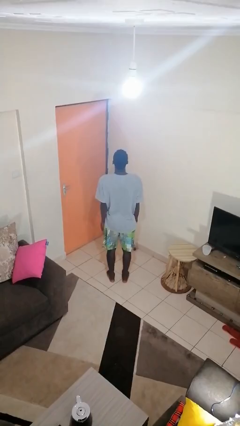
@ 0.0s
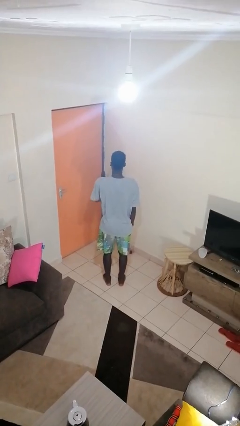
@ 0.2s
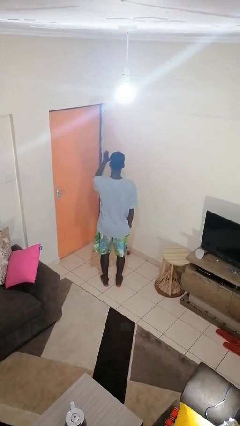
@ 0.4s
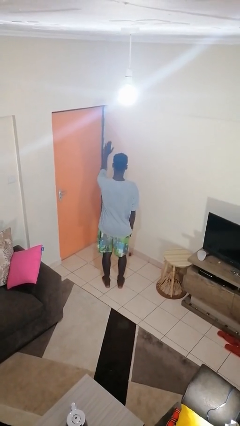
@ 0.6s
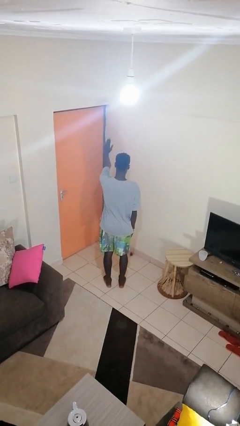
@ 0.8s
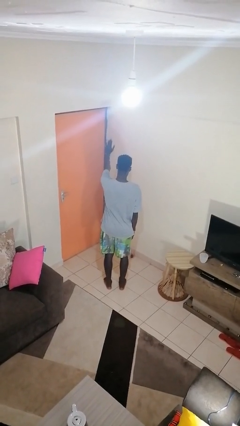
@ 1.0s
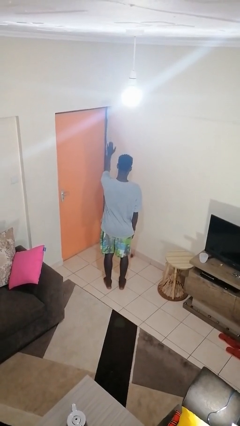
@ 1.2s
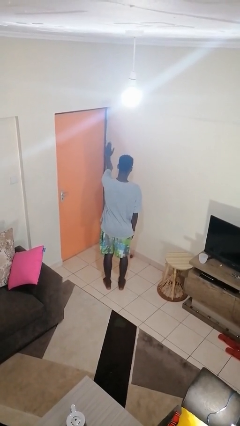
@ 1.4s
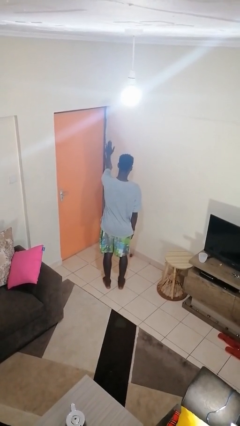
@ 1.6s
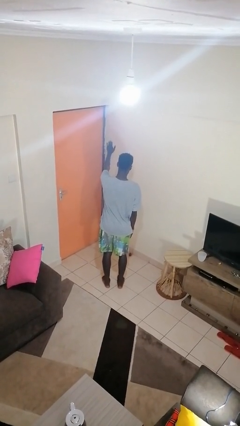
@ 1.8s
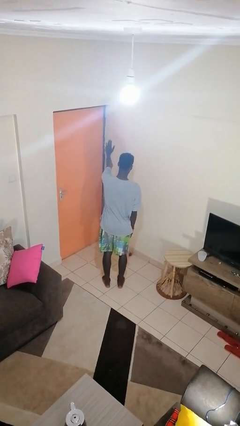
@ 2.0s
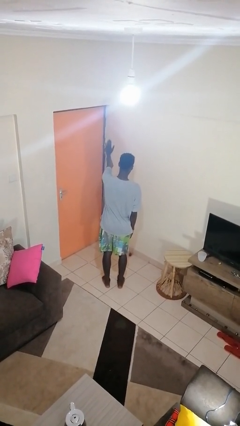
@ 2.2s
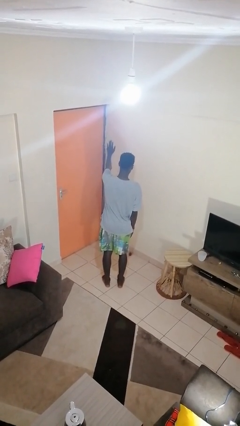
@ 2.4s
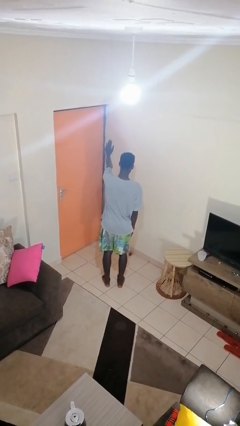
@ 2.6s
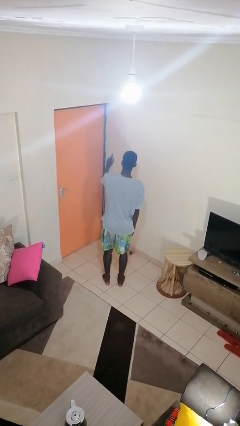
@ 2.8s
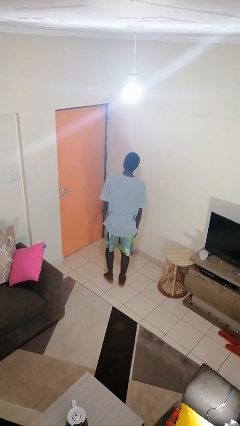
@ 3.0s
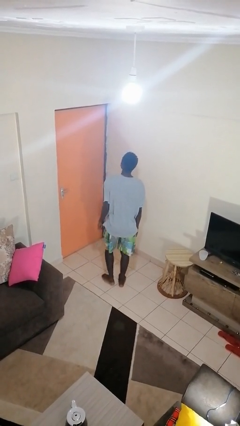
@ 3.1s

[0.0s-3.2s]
person gestures stop

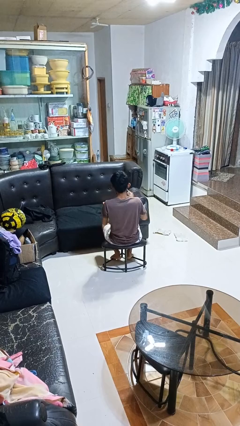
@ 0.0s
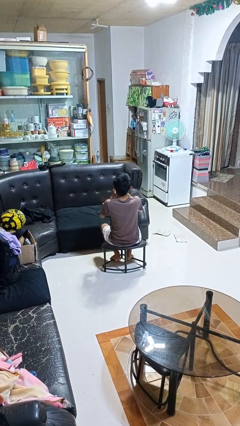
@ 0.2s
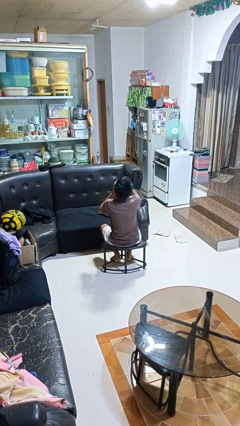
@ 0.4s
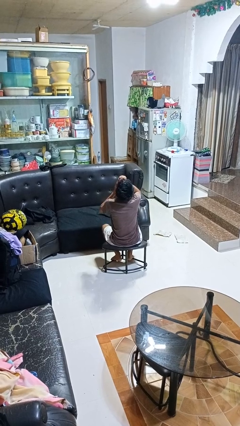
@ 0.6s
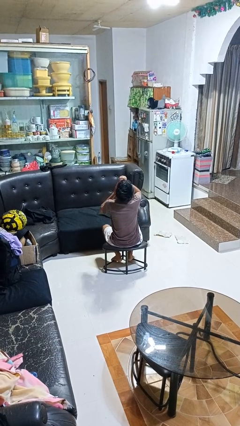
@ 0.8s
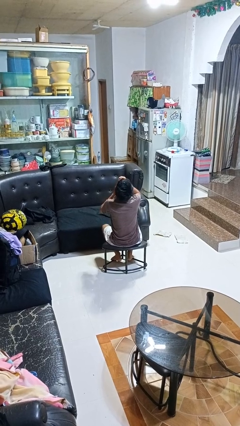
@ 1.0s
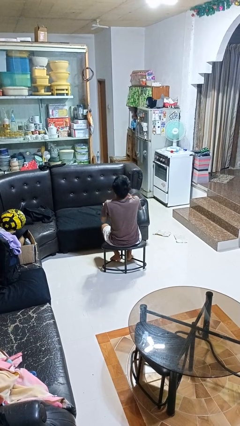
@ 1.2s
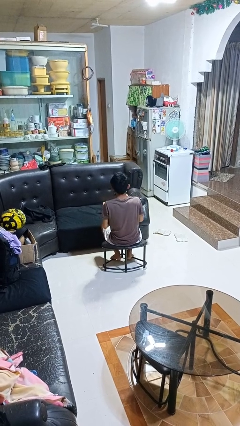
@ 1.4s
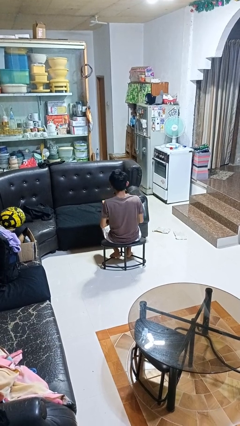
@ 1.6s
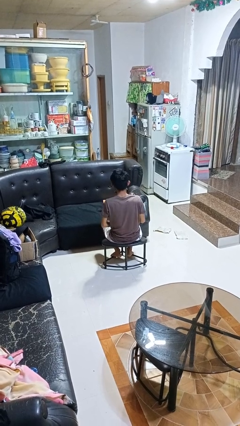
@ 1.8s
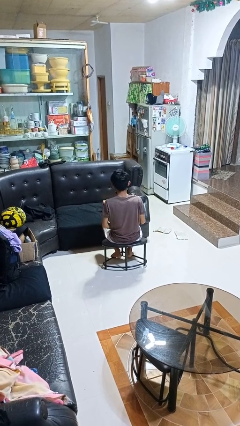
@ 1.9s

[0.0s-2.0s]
person drinks from beverage can

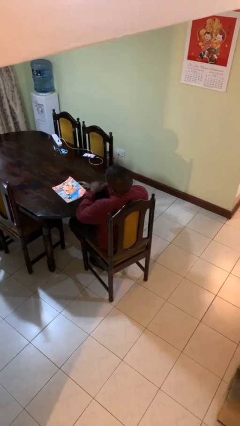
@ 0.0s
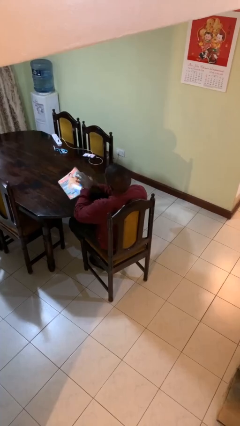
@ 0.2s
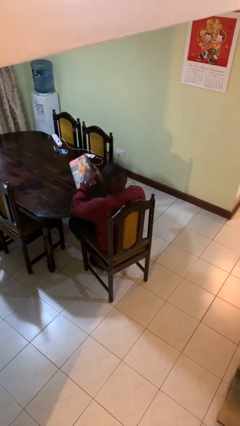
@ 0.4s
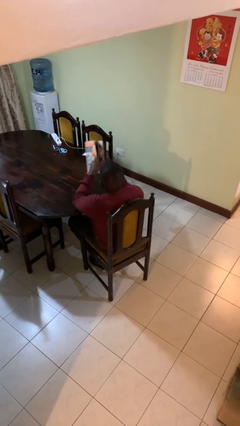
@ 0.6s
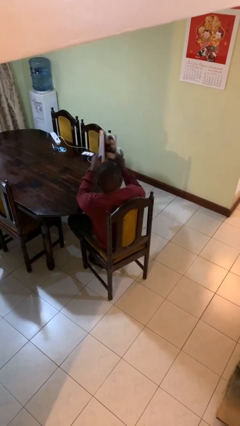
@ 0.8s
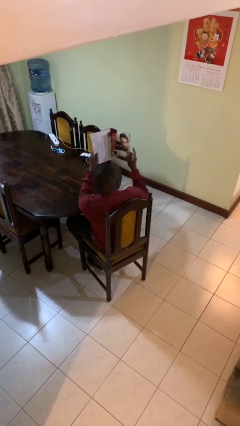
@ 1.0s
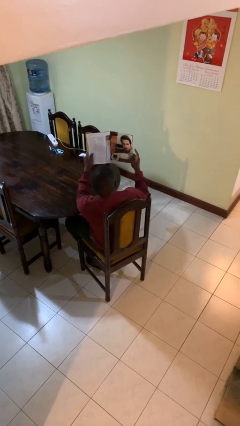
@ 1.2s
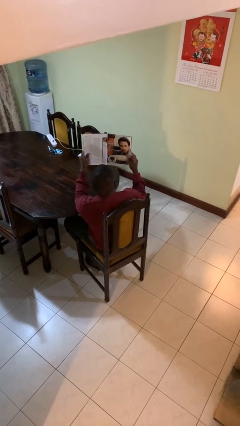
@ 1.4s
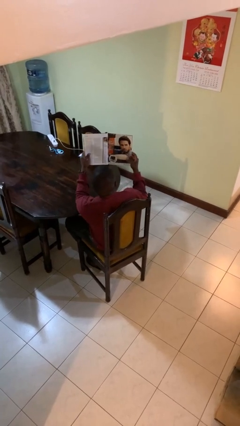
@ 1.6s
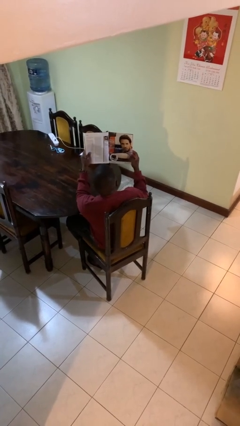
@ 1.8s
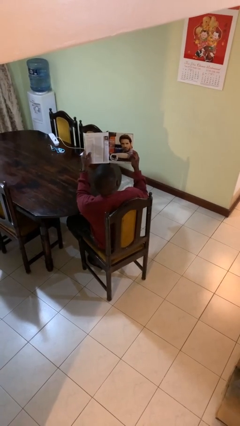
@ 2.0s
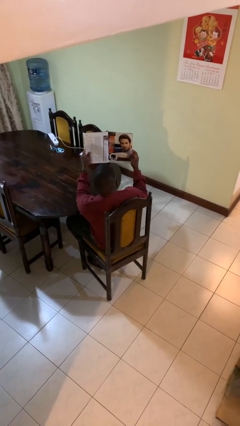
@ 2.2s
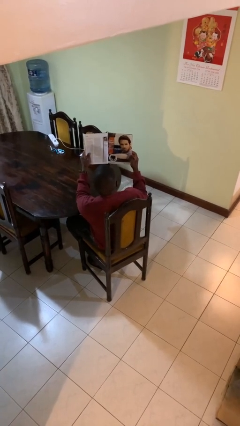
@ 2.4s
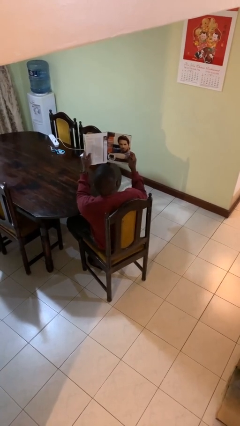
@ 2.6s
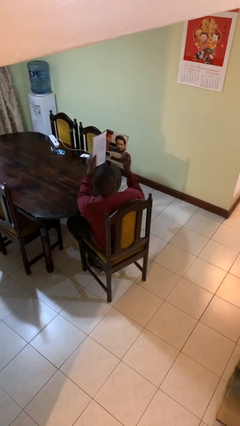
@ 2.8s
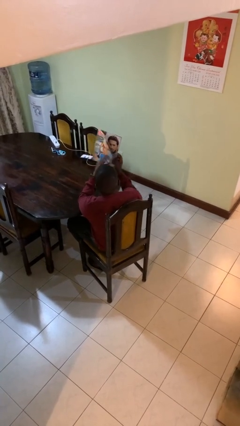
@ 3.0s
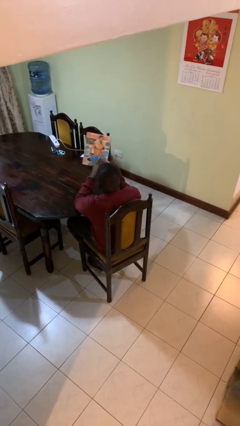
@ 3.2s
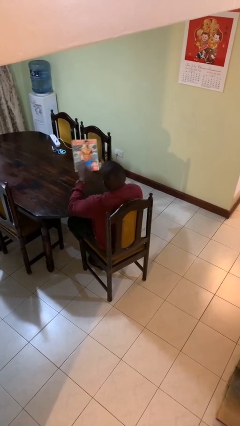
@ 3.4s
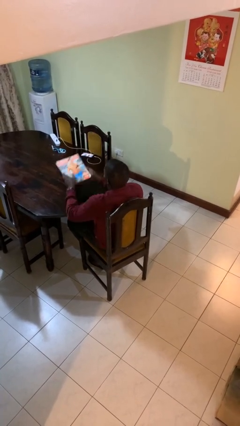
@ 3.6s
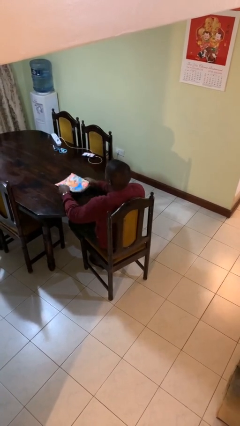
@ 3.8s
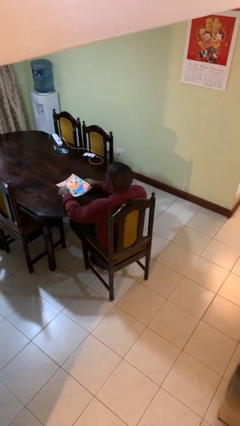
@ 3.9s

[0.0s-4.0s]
person reads magazine

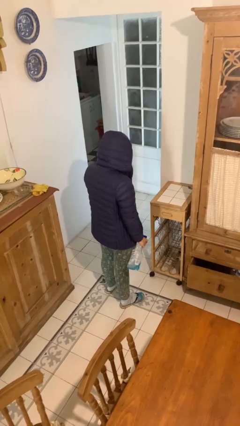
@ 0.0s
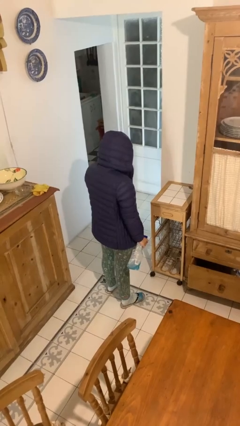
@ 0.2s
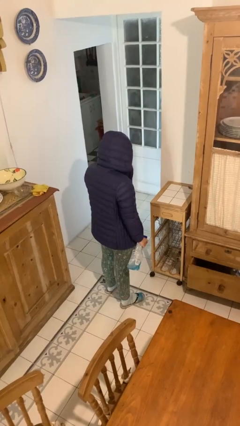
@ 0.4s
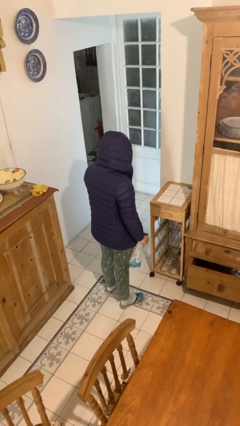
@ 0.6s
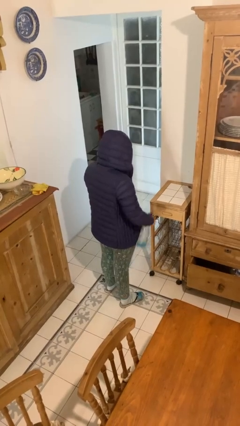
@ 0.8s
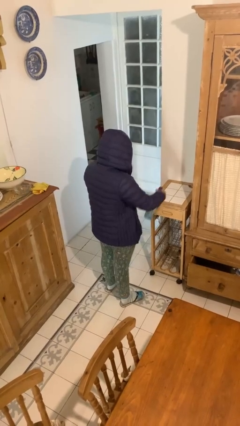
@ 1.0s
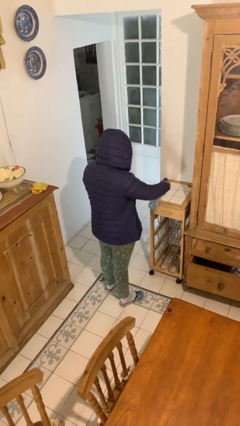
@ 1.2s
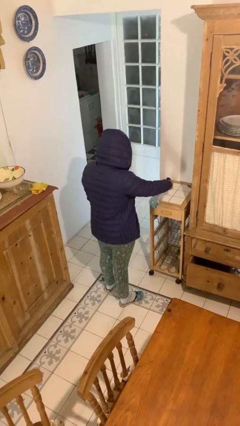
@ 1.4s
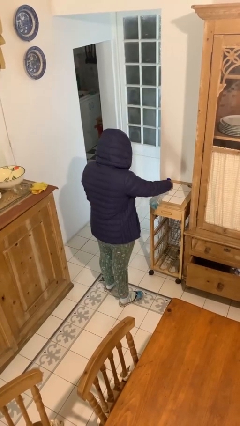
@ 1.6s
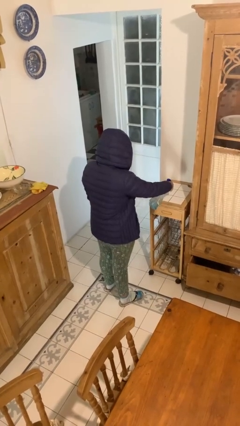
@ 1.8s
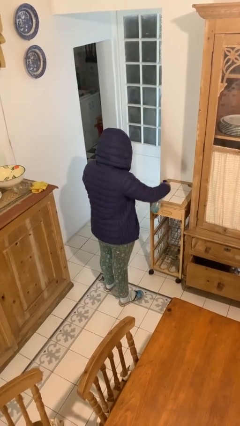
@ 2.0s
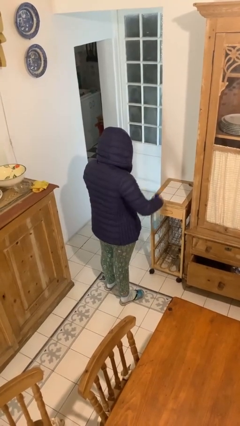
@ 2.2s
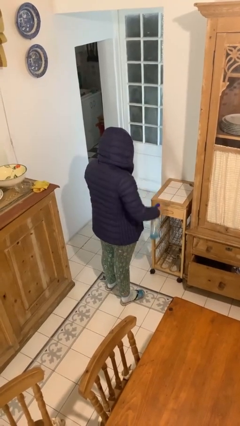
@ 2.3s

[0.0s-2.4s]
person sprays from bottle

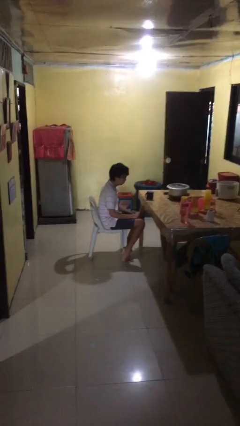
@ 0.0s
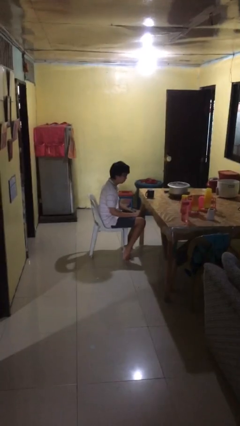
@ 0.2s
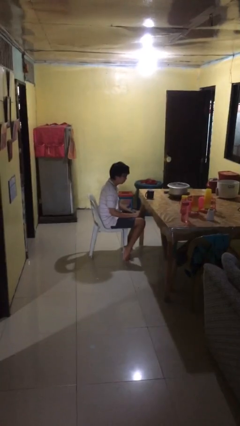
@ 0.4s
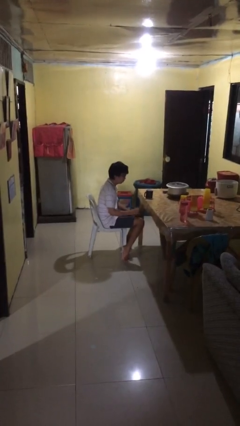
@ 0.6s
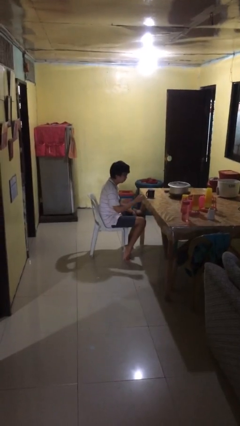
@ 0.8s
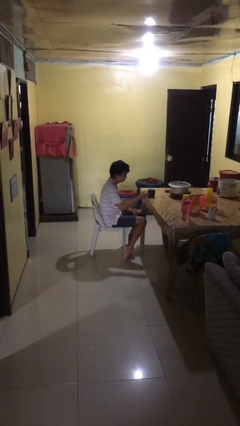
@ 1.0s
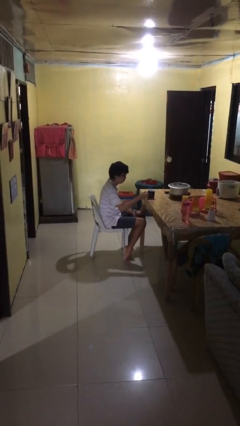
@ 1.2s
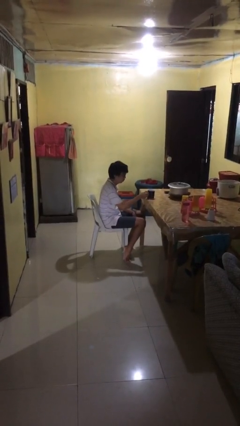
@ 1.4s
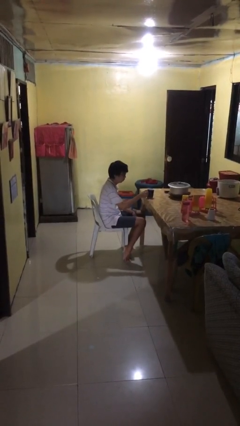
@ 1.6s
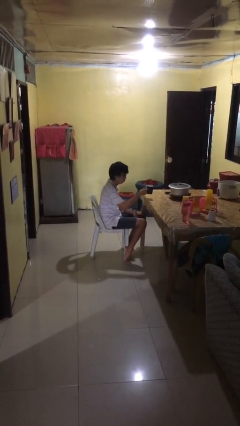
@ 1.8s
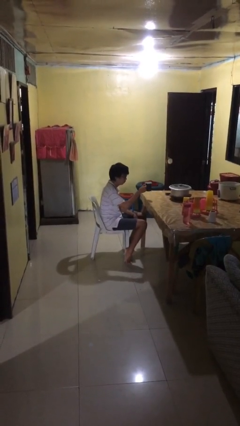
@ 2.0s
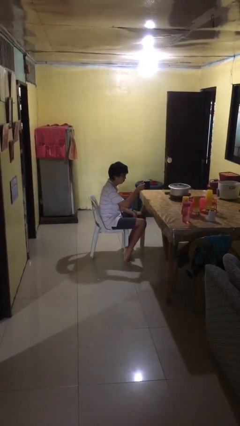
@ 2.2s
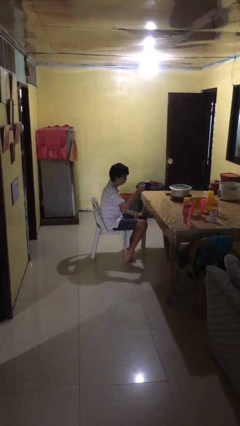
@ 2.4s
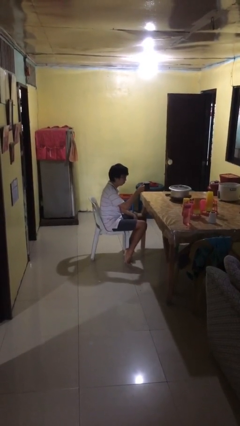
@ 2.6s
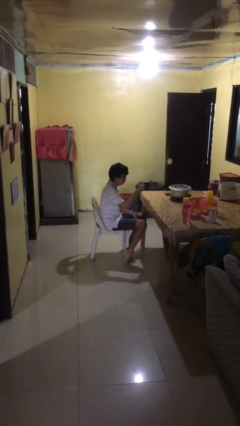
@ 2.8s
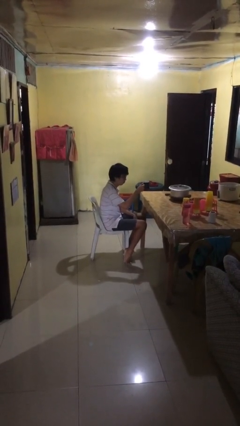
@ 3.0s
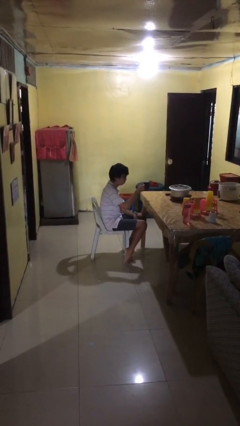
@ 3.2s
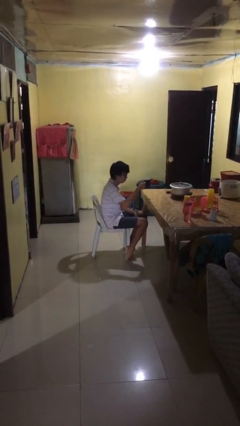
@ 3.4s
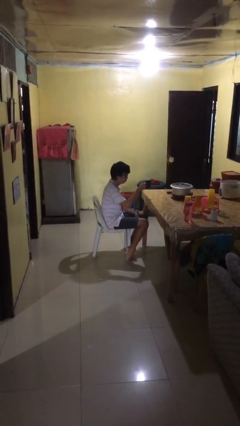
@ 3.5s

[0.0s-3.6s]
person picks up object from table

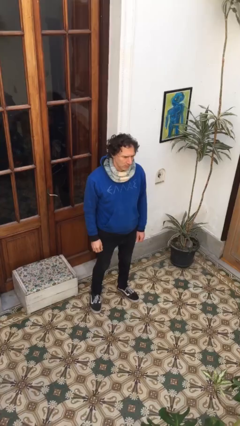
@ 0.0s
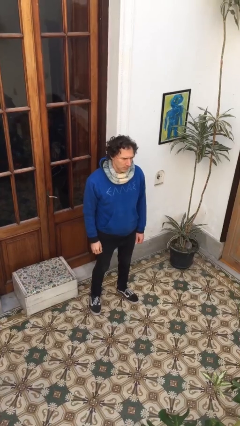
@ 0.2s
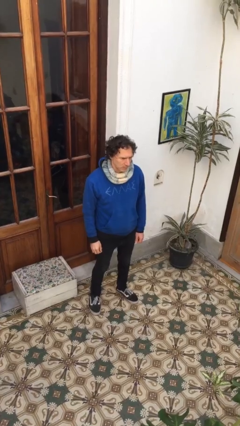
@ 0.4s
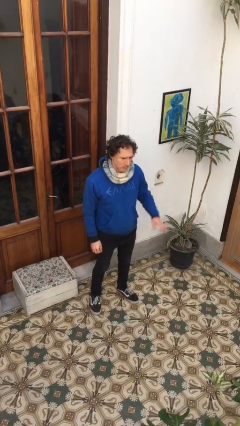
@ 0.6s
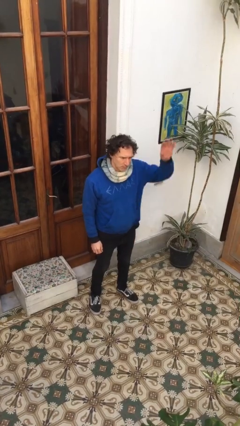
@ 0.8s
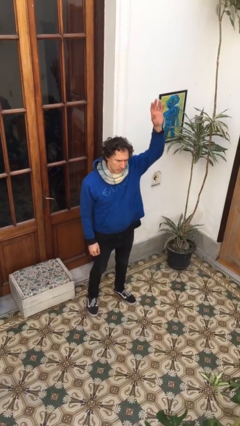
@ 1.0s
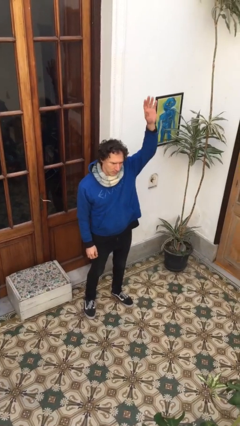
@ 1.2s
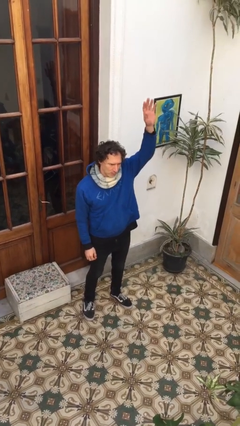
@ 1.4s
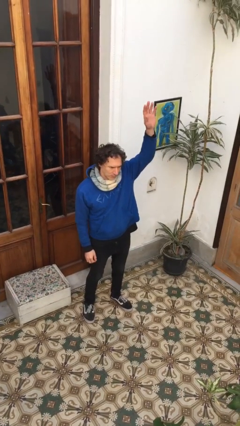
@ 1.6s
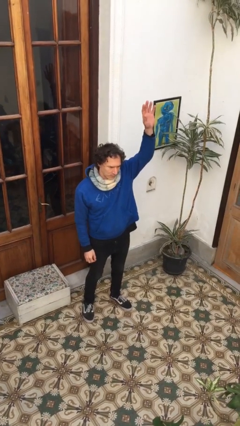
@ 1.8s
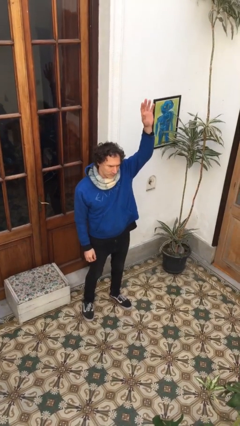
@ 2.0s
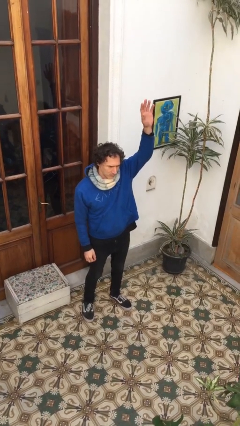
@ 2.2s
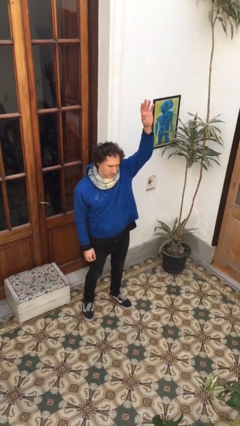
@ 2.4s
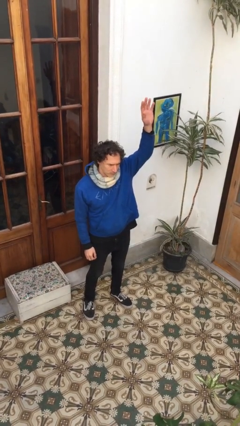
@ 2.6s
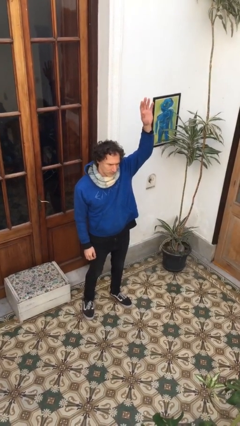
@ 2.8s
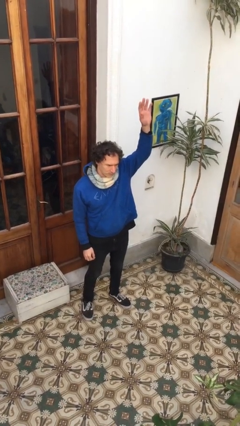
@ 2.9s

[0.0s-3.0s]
person gestures raise hand
